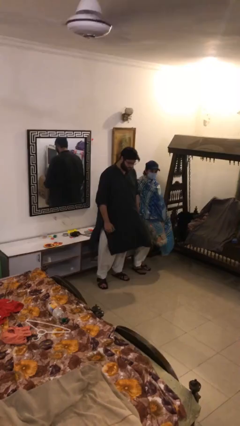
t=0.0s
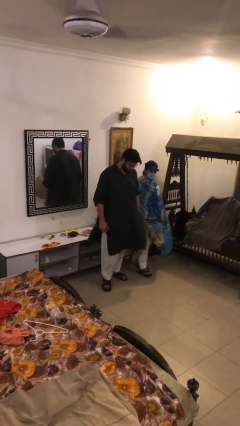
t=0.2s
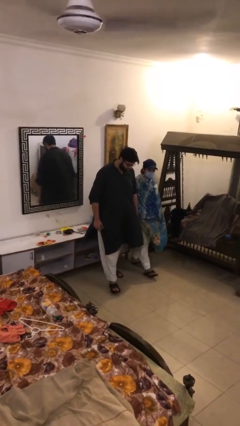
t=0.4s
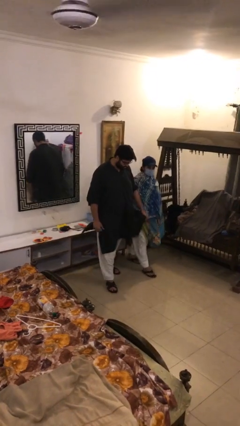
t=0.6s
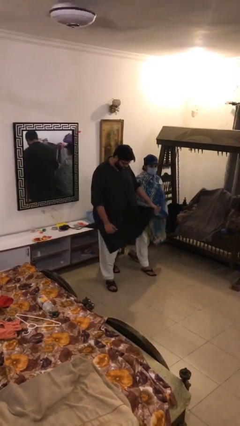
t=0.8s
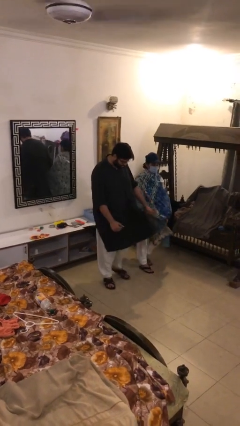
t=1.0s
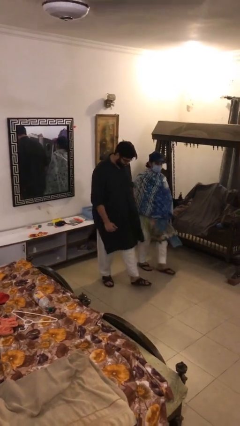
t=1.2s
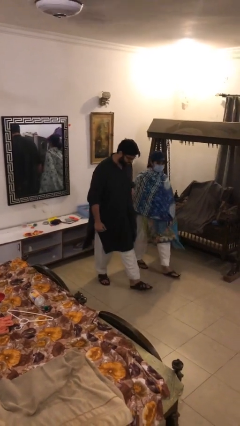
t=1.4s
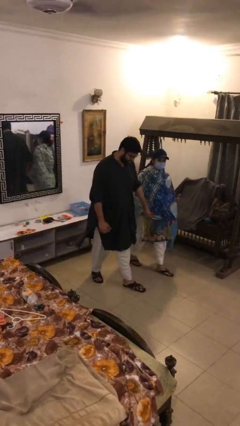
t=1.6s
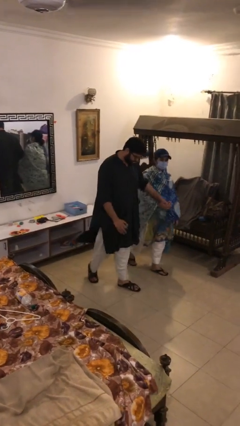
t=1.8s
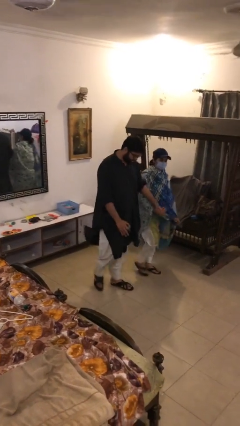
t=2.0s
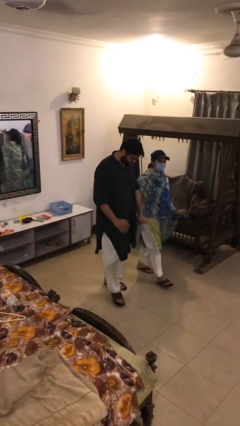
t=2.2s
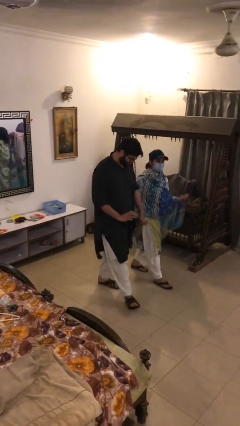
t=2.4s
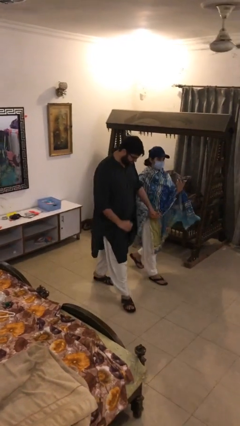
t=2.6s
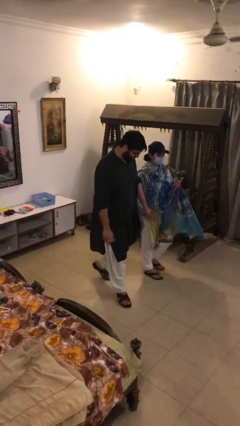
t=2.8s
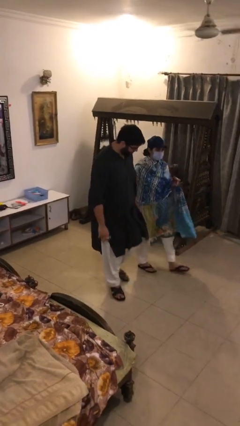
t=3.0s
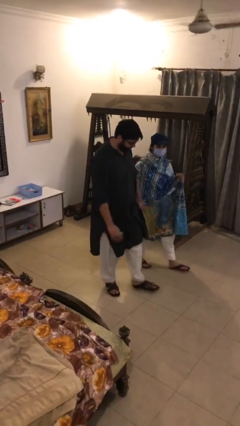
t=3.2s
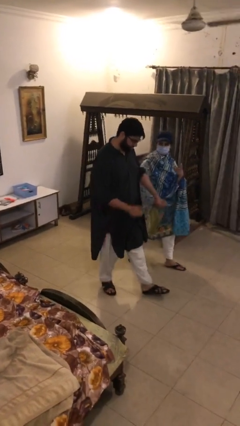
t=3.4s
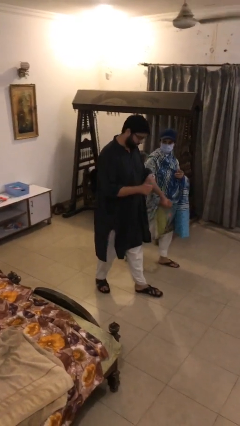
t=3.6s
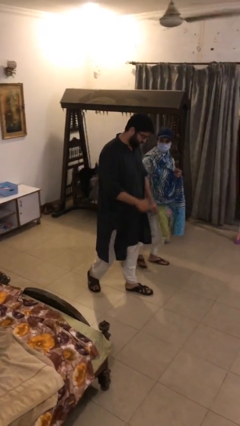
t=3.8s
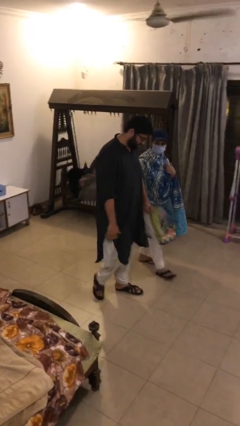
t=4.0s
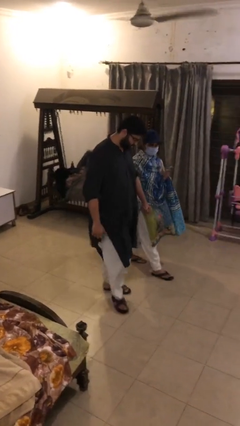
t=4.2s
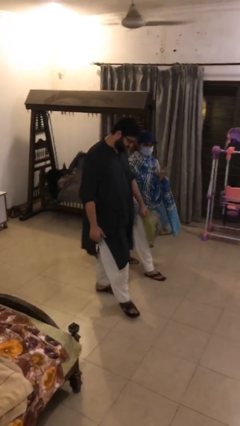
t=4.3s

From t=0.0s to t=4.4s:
person holds hand

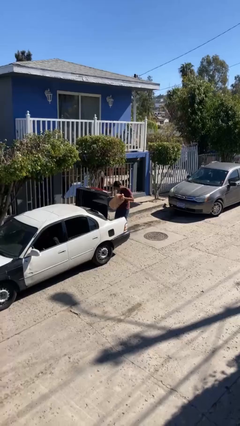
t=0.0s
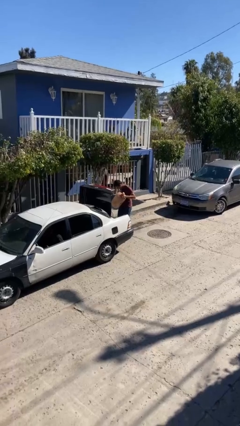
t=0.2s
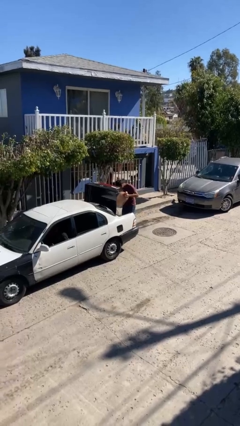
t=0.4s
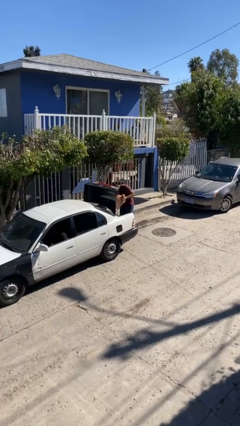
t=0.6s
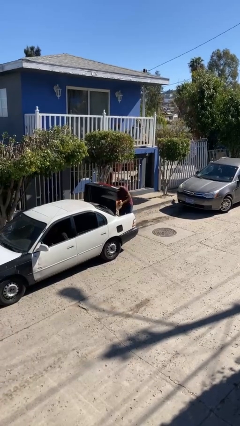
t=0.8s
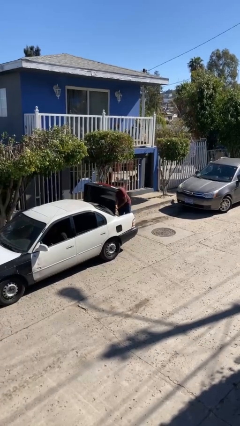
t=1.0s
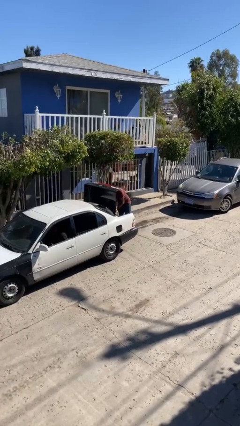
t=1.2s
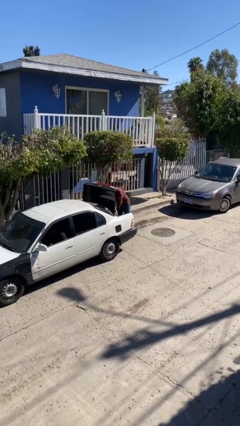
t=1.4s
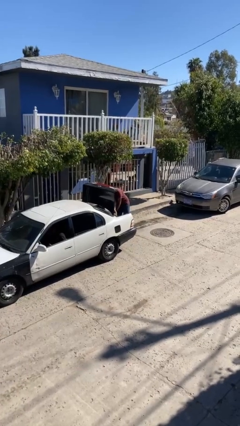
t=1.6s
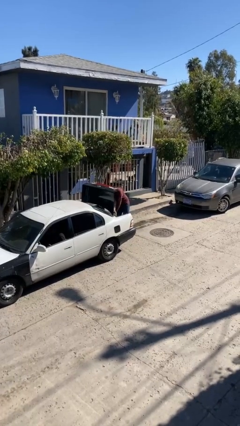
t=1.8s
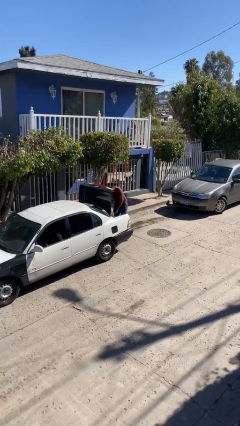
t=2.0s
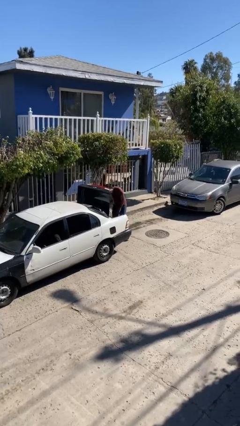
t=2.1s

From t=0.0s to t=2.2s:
person loads car

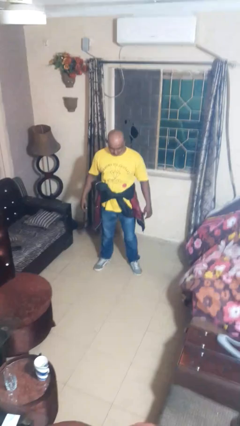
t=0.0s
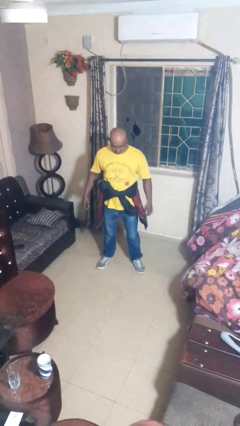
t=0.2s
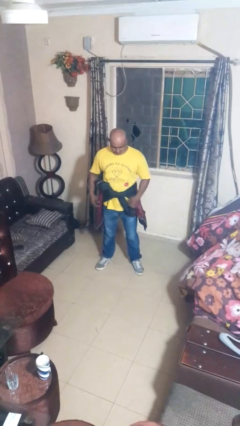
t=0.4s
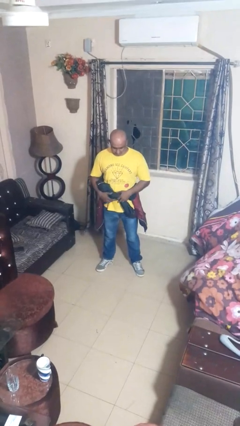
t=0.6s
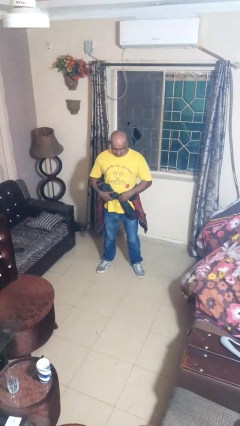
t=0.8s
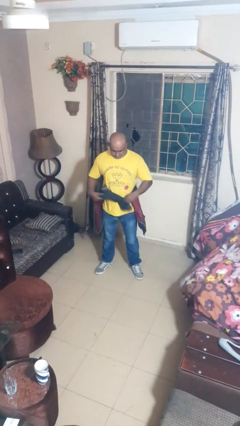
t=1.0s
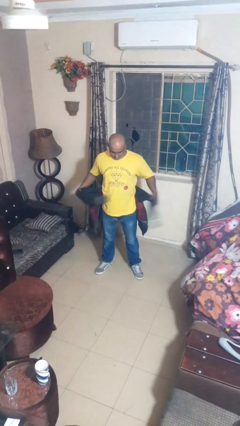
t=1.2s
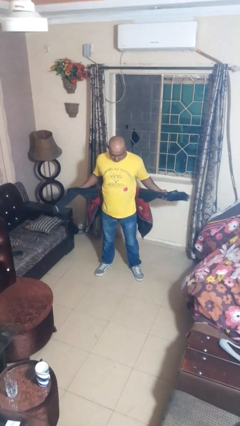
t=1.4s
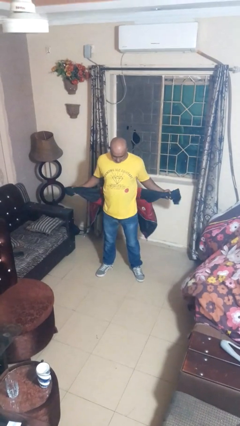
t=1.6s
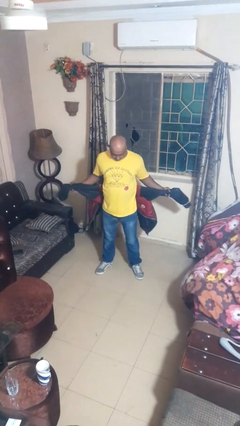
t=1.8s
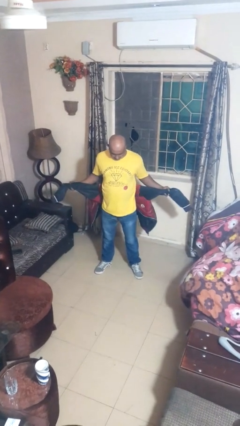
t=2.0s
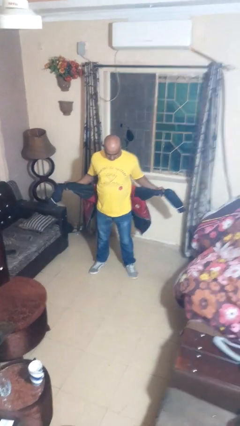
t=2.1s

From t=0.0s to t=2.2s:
person unties jacket around waist

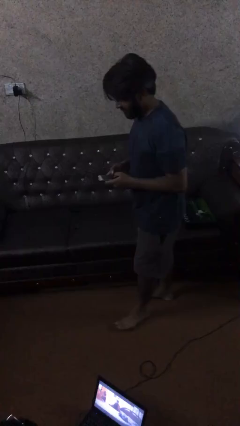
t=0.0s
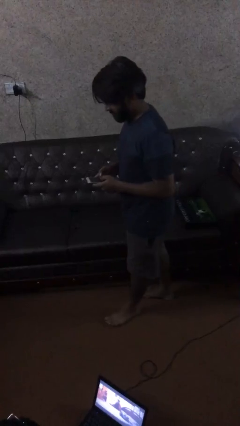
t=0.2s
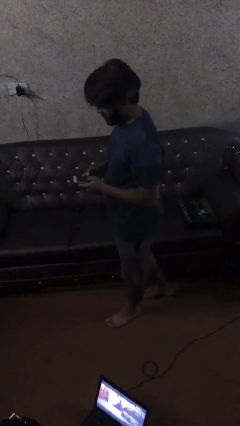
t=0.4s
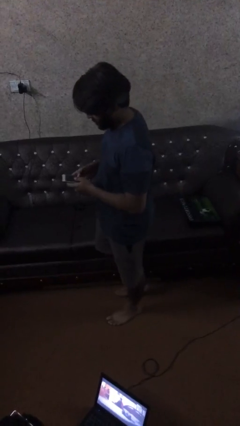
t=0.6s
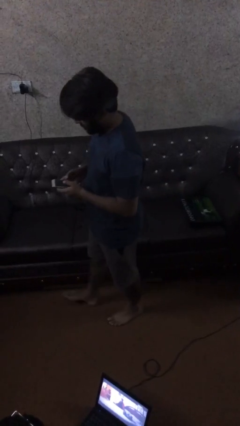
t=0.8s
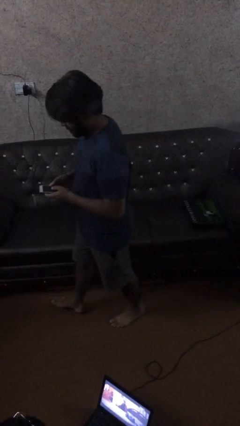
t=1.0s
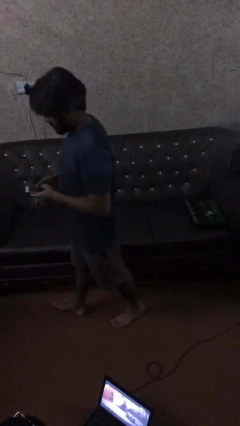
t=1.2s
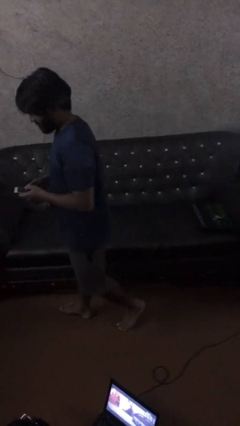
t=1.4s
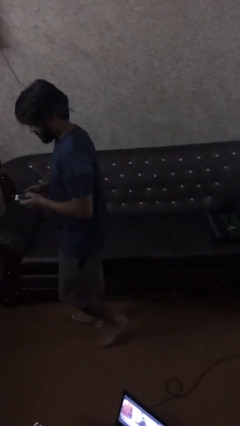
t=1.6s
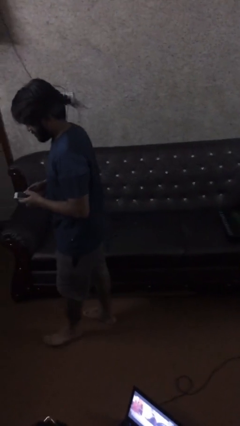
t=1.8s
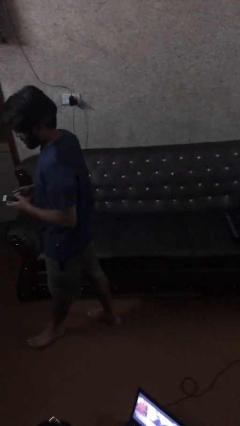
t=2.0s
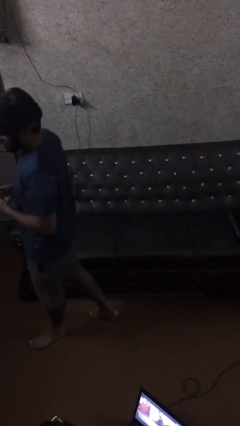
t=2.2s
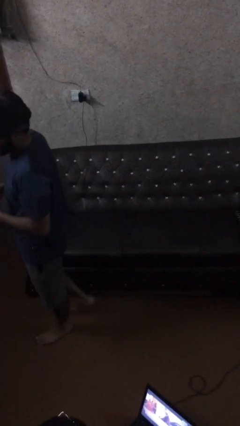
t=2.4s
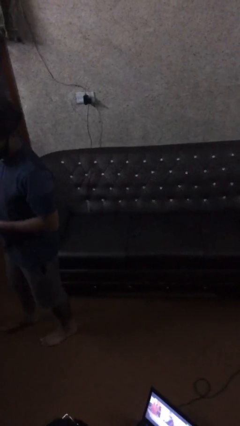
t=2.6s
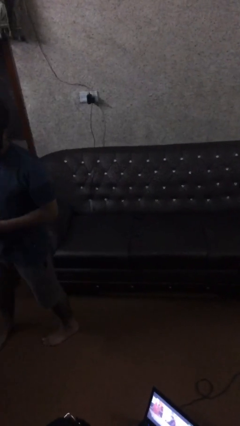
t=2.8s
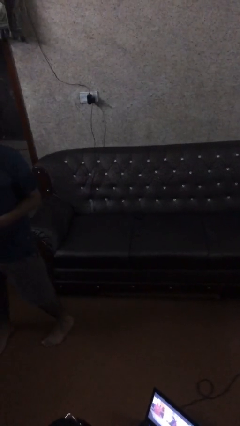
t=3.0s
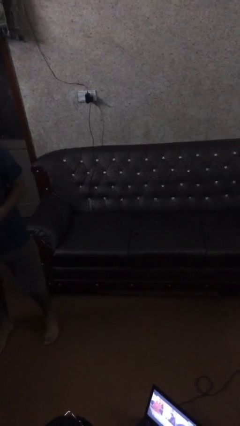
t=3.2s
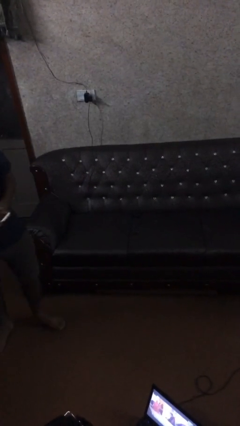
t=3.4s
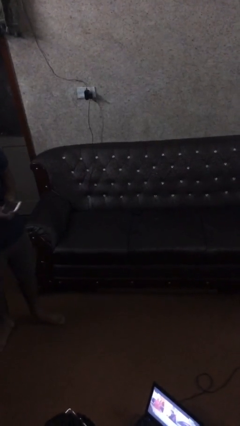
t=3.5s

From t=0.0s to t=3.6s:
person texts on phone

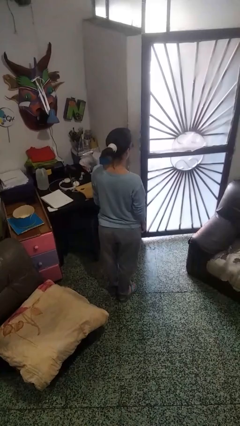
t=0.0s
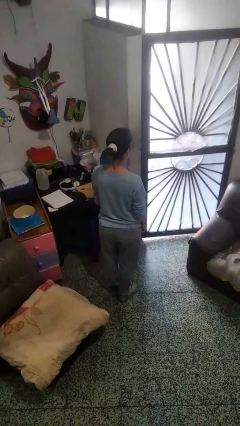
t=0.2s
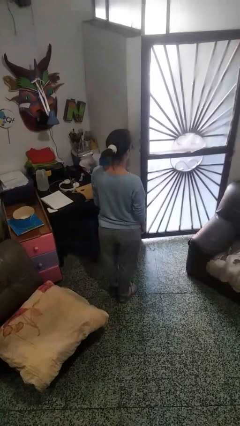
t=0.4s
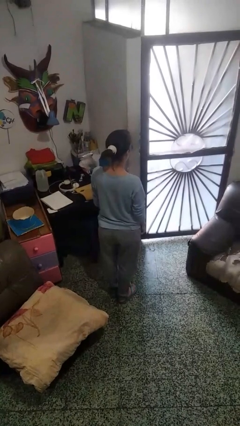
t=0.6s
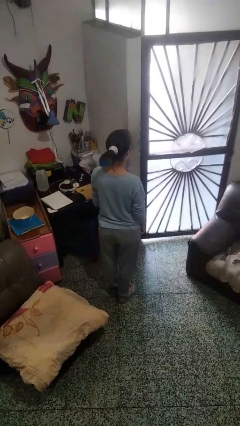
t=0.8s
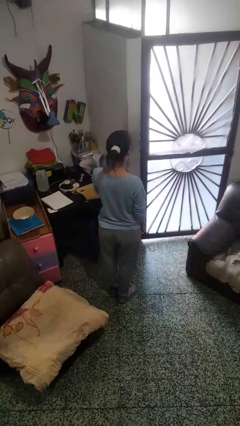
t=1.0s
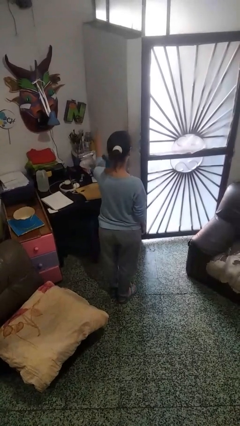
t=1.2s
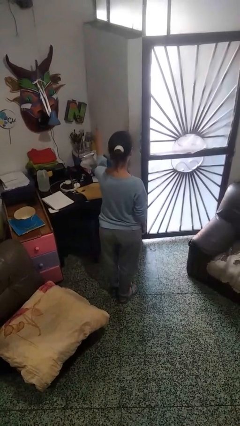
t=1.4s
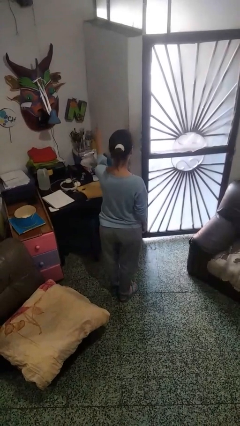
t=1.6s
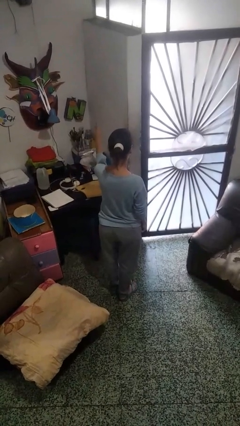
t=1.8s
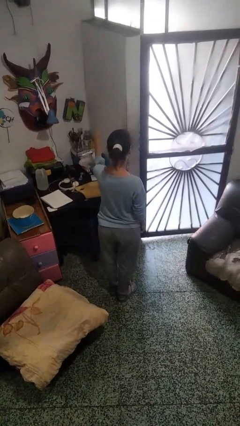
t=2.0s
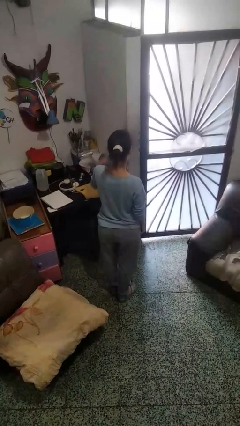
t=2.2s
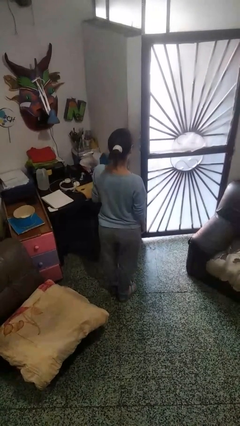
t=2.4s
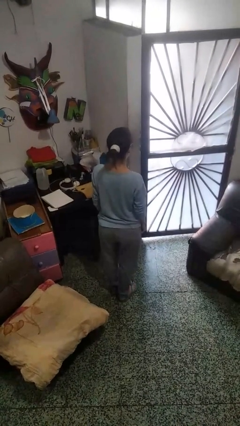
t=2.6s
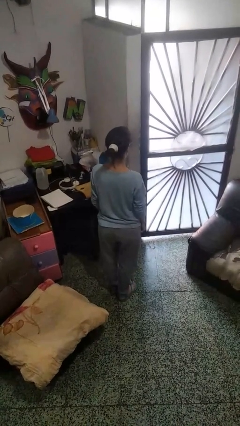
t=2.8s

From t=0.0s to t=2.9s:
person gestures number one

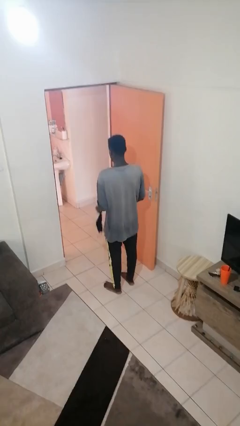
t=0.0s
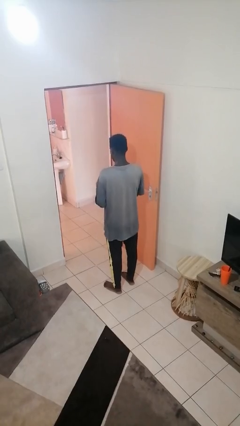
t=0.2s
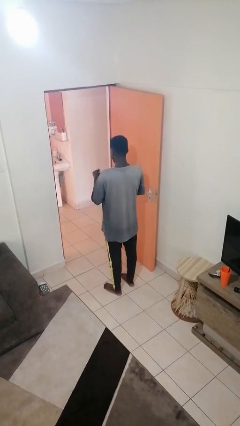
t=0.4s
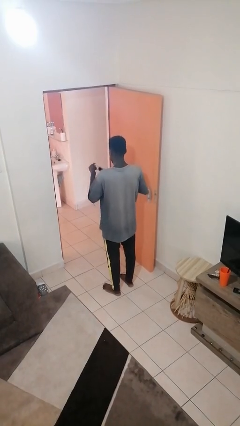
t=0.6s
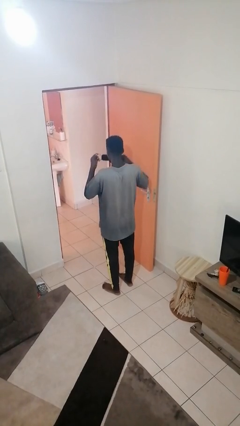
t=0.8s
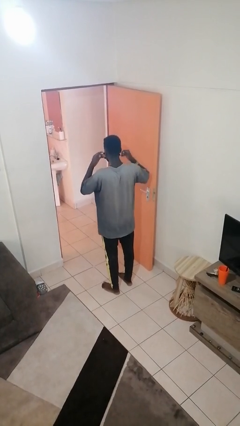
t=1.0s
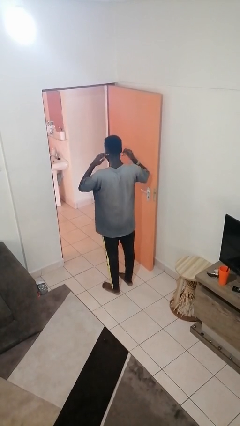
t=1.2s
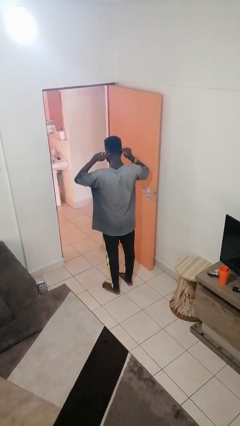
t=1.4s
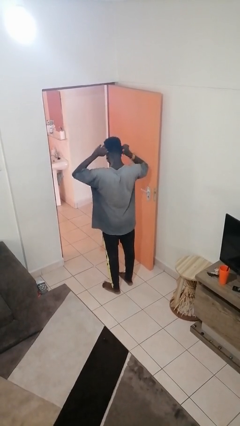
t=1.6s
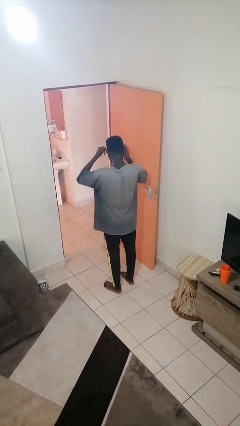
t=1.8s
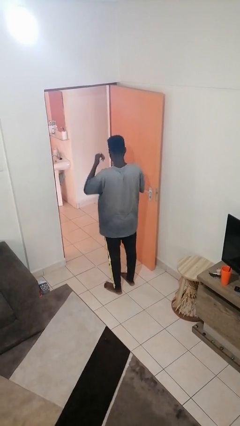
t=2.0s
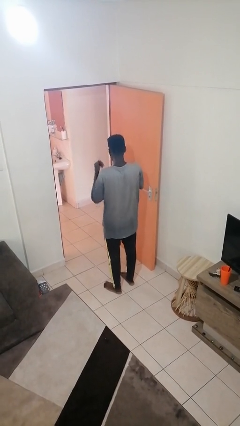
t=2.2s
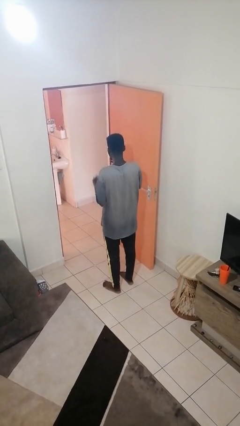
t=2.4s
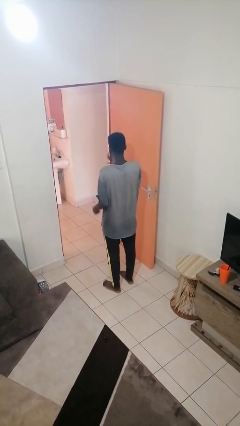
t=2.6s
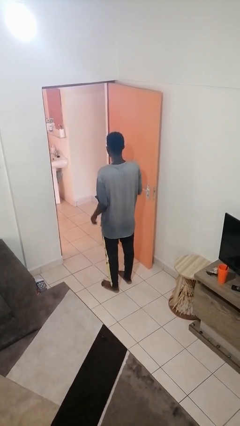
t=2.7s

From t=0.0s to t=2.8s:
person puts on facemask
